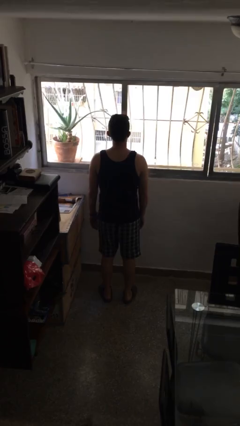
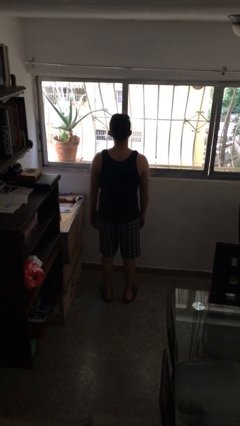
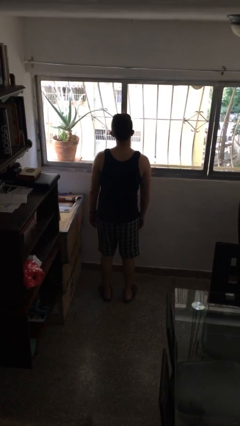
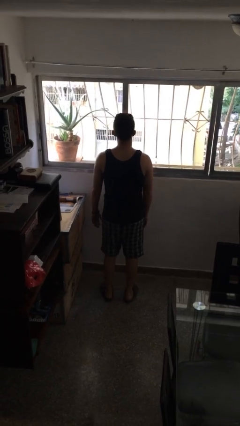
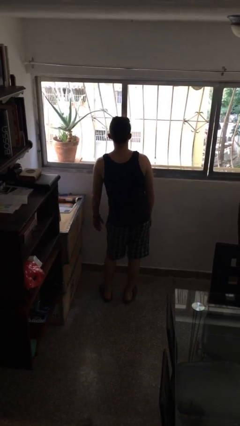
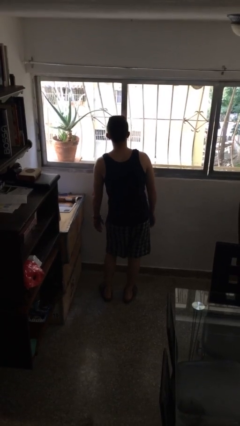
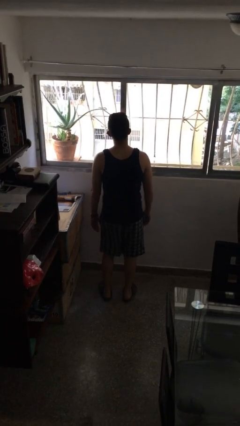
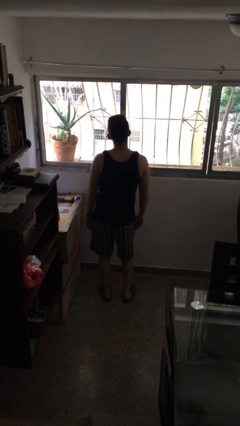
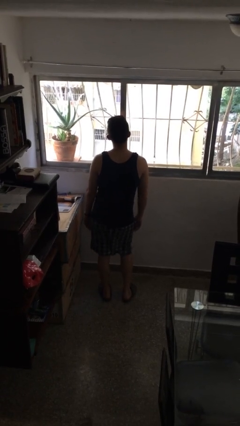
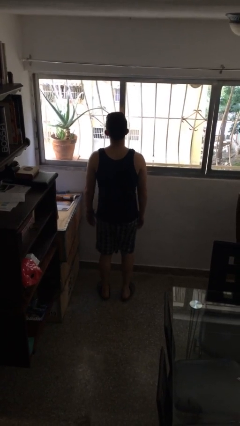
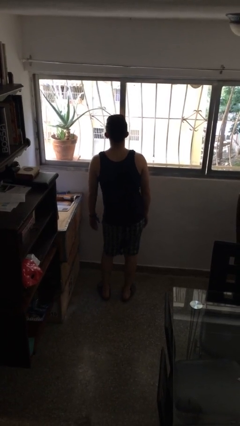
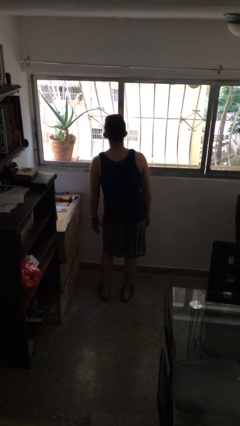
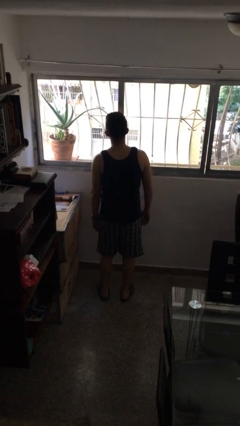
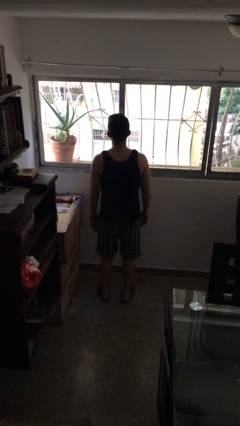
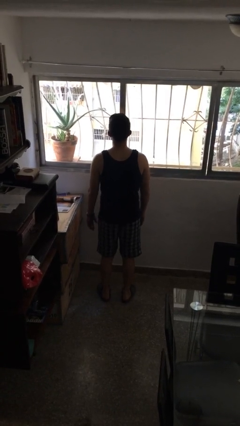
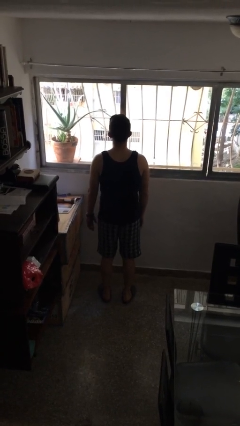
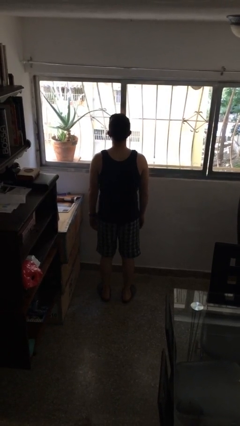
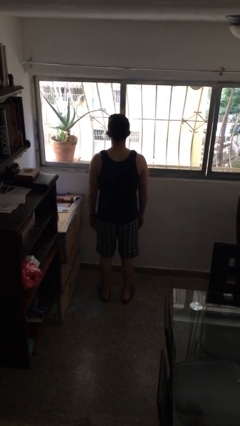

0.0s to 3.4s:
person wiggles hips

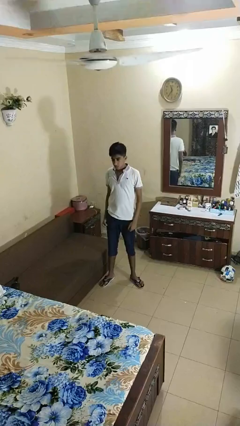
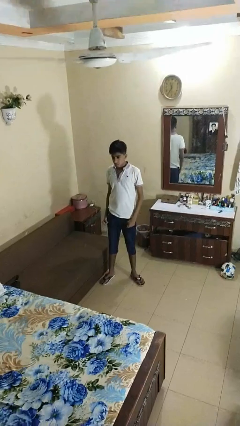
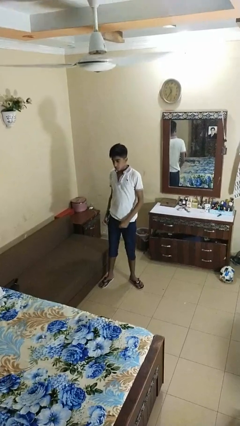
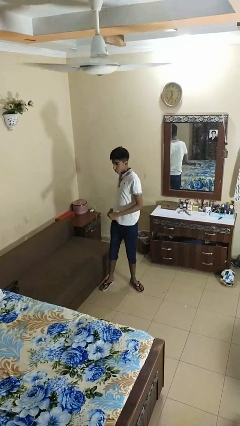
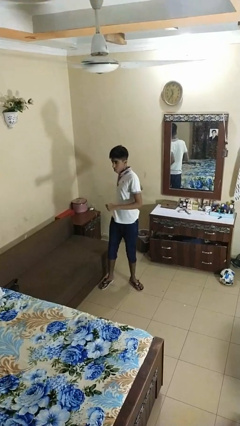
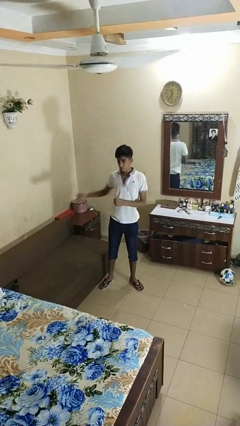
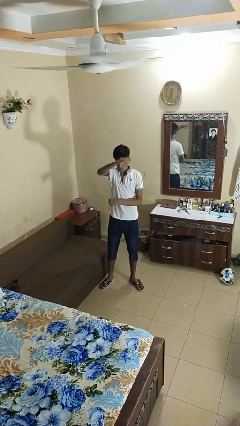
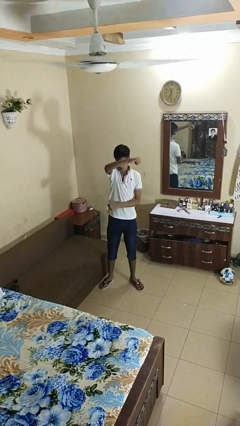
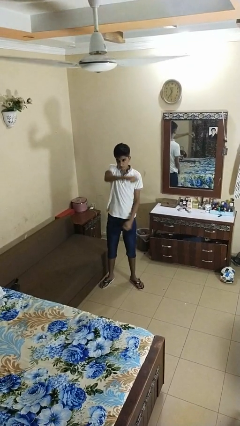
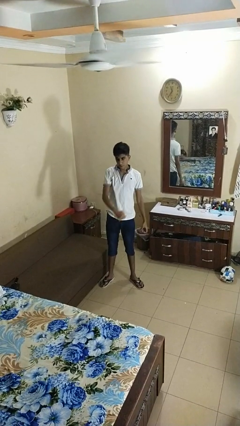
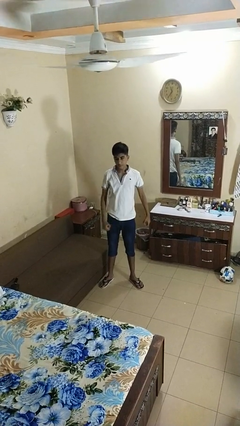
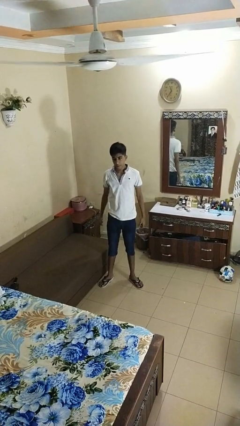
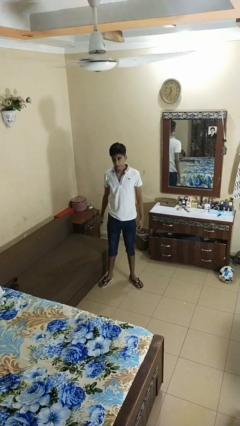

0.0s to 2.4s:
person punches

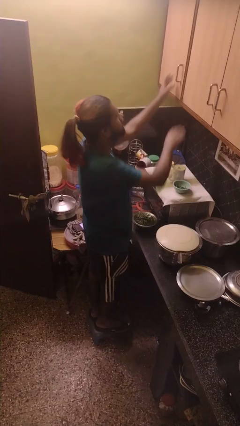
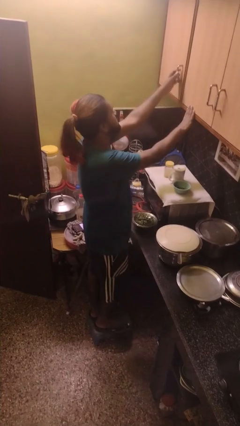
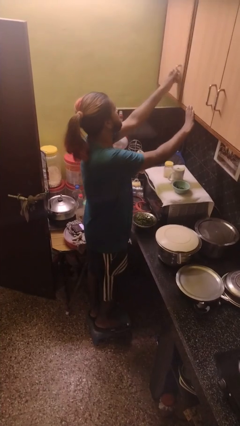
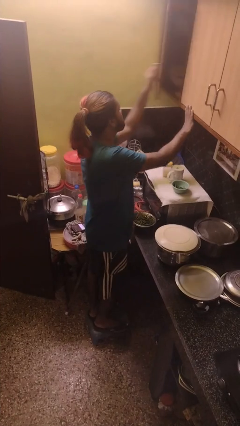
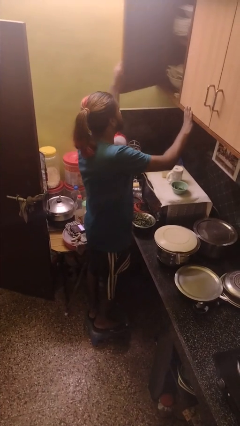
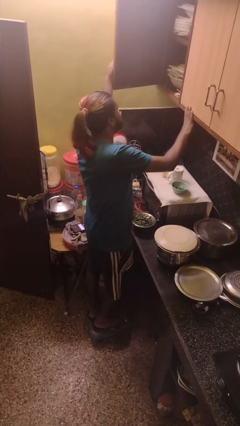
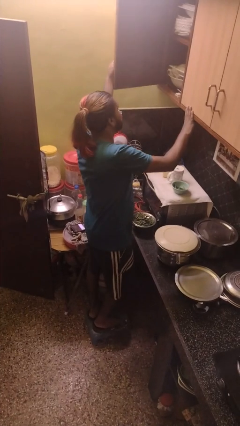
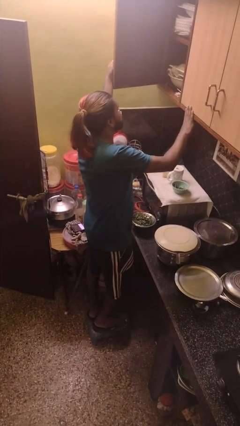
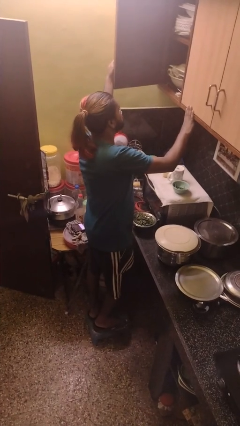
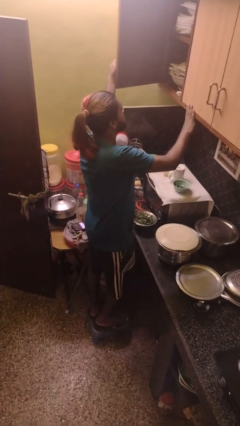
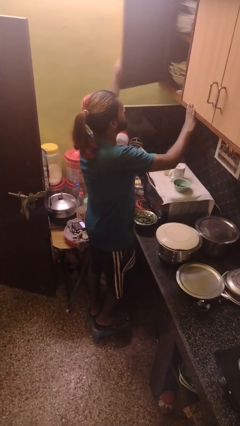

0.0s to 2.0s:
person opens cabinet

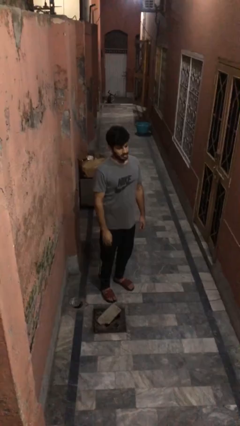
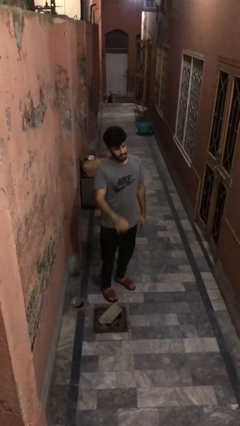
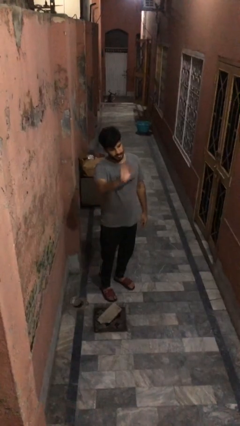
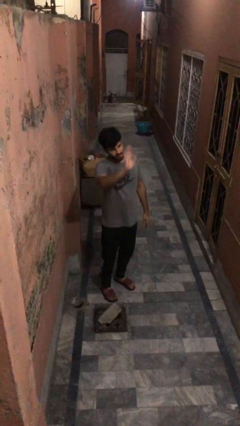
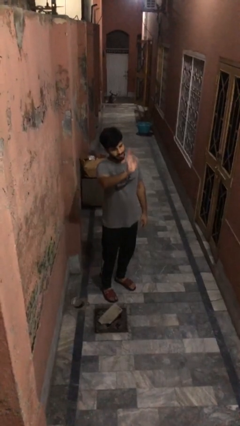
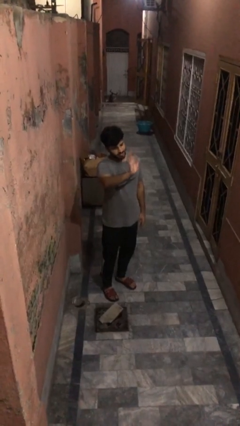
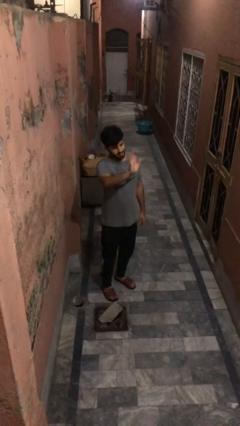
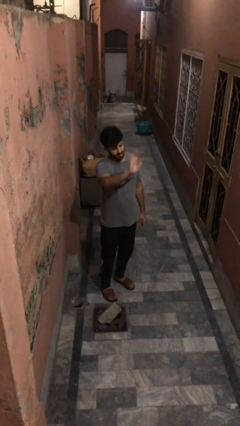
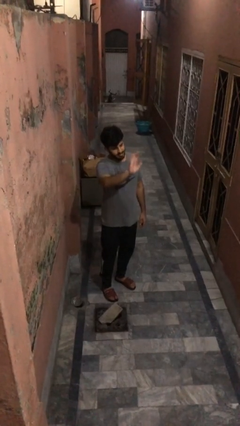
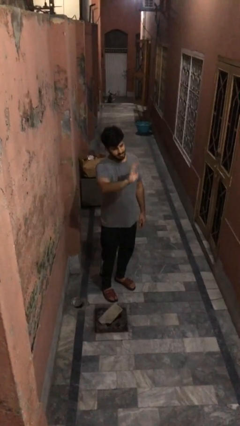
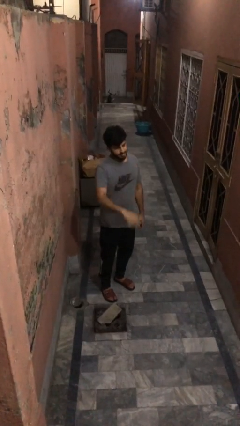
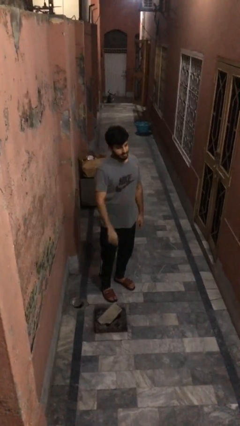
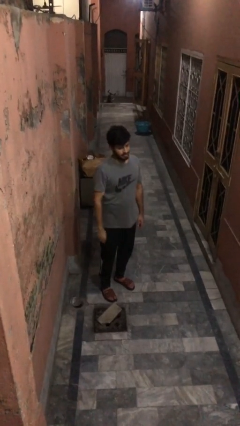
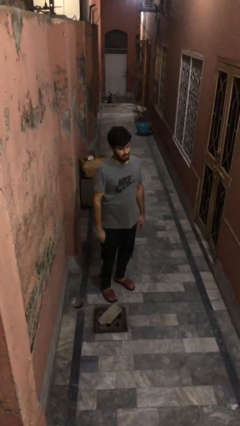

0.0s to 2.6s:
person waves at person

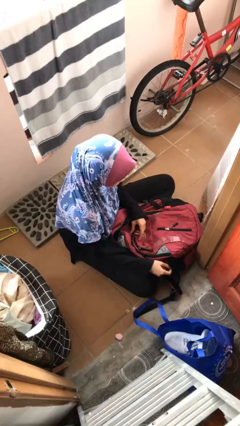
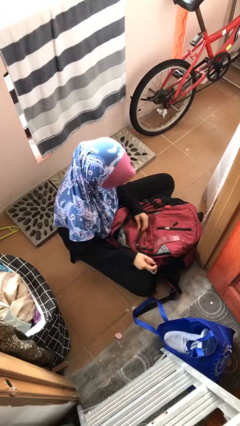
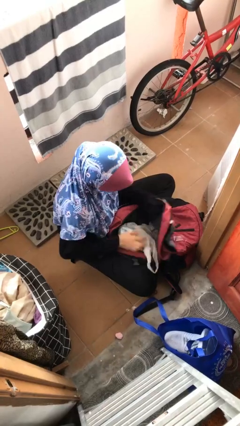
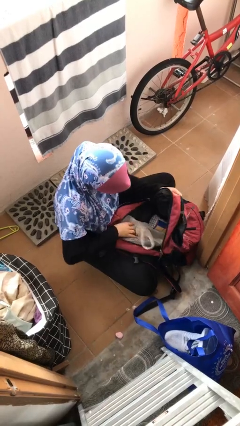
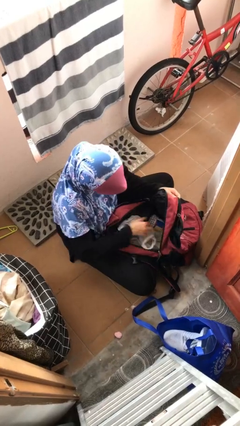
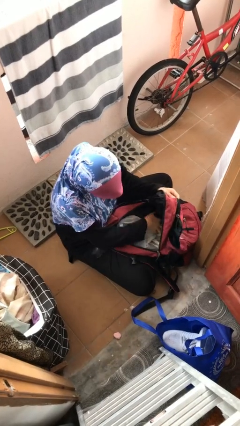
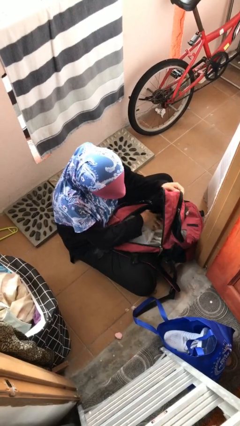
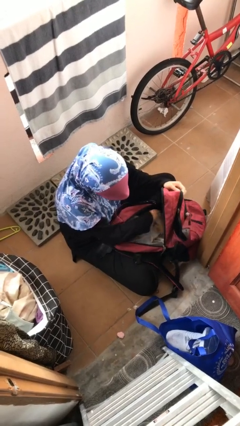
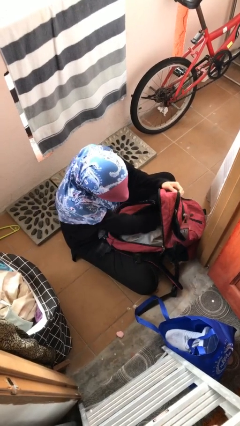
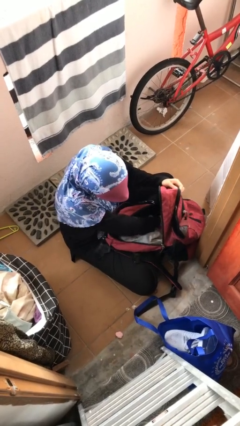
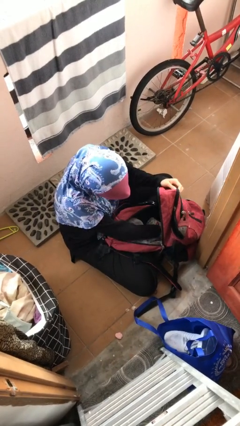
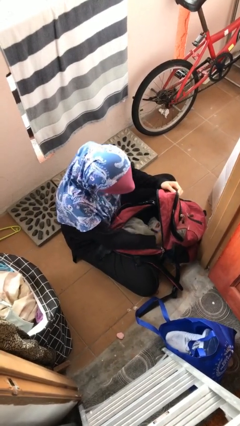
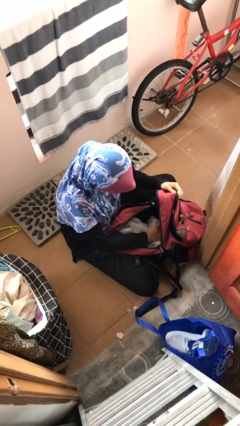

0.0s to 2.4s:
person searches in backpack

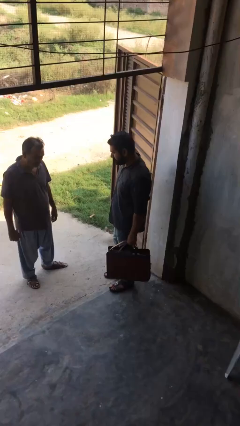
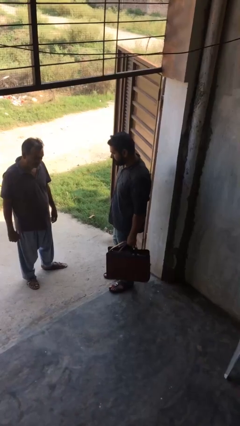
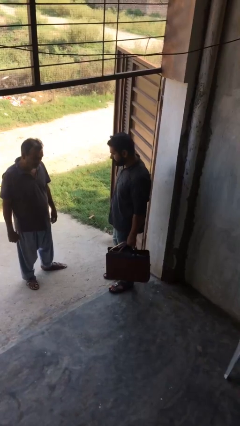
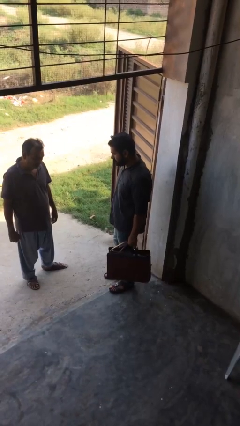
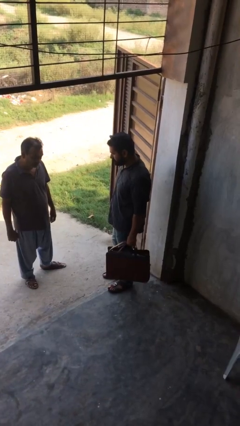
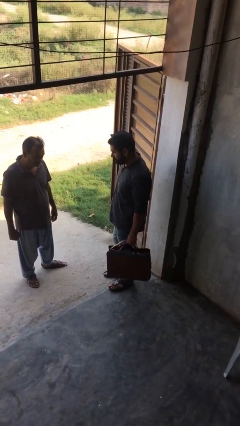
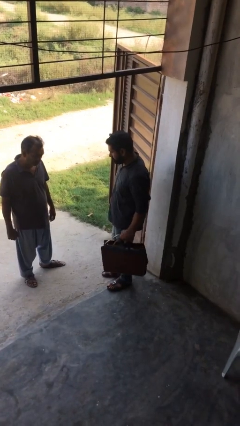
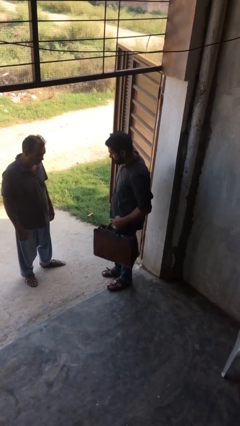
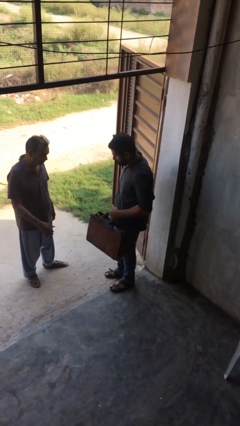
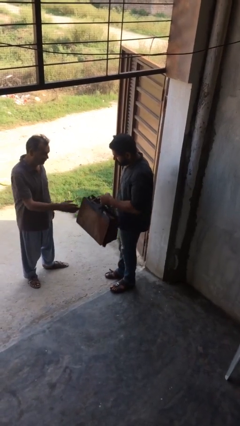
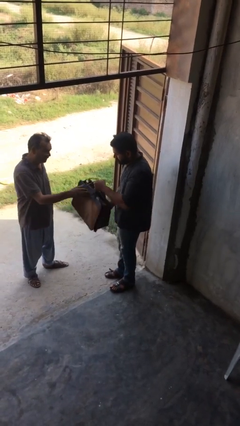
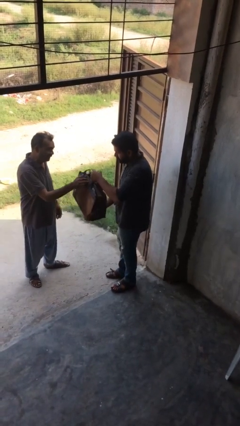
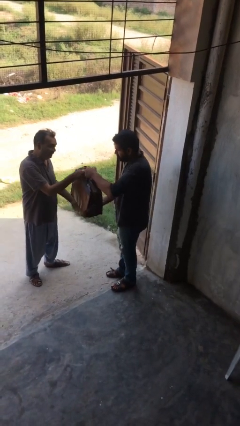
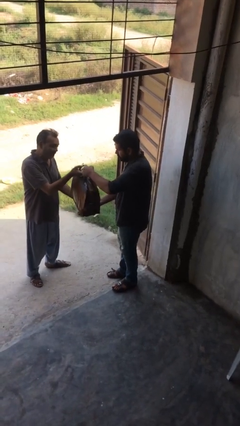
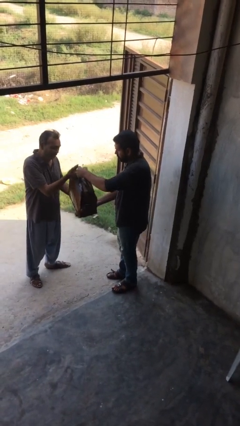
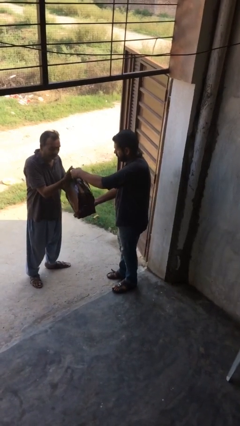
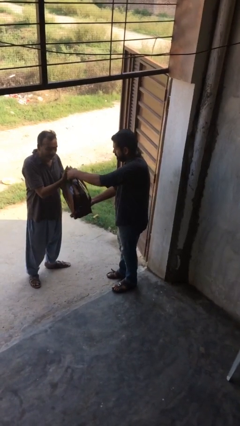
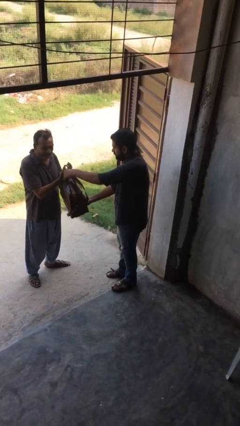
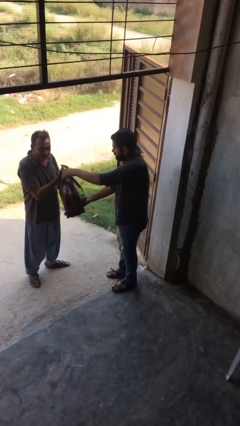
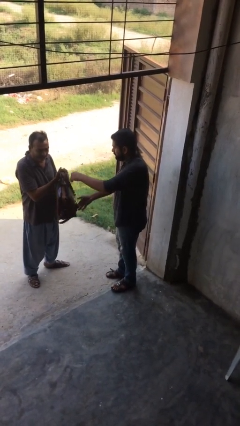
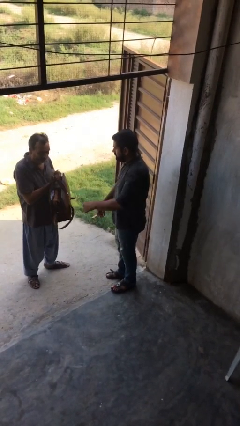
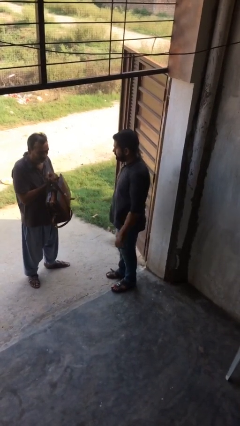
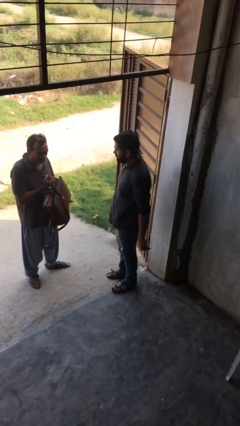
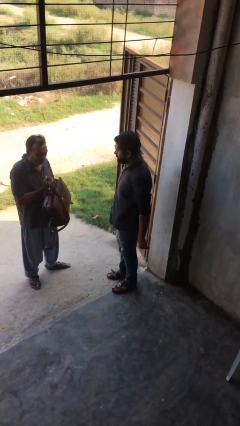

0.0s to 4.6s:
person transfers object to person
